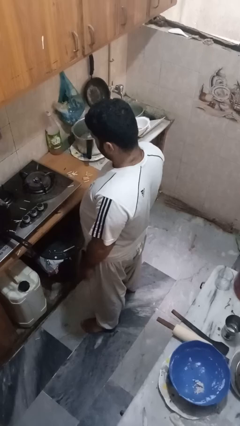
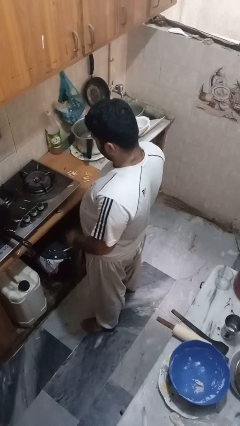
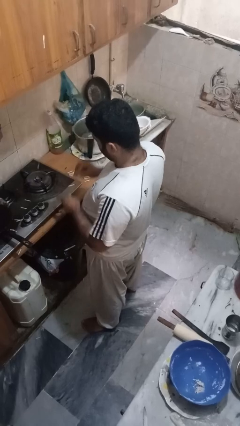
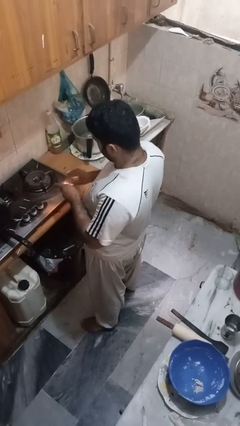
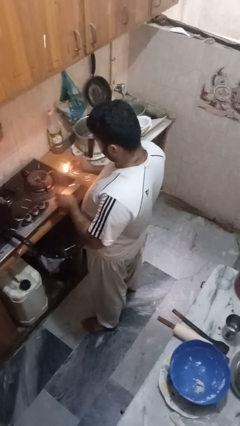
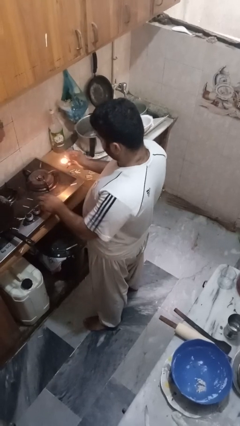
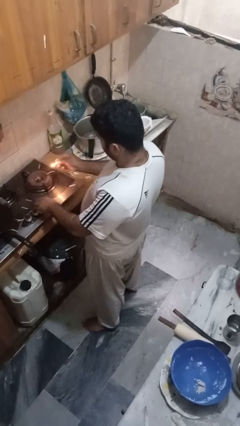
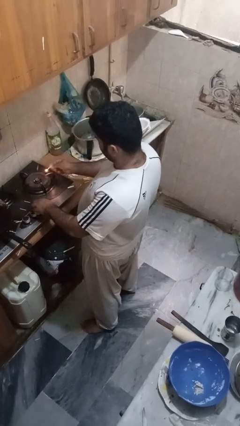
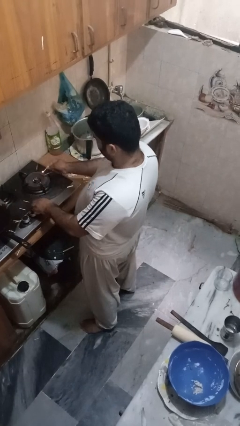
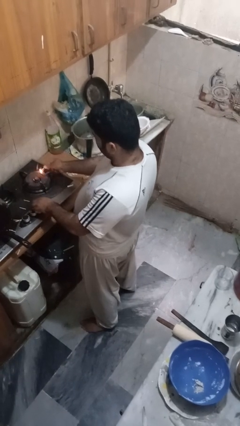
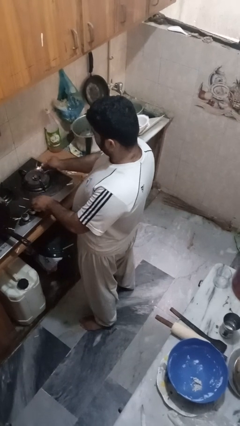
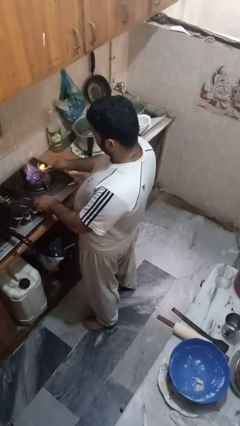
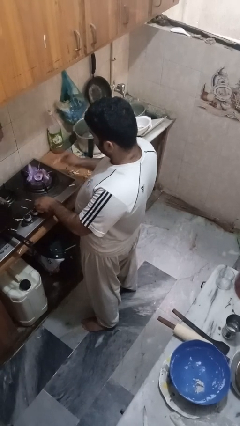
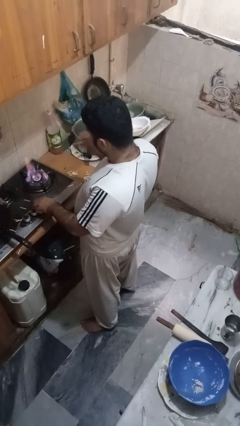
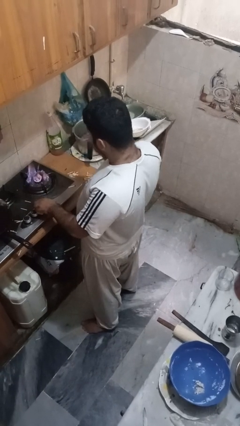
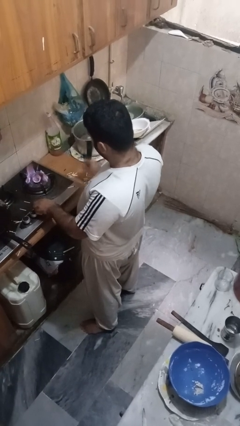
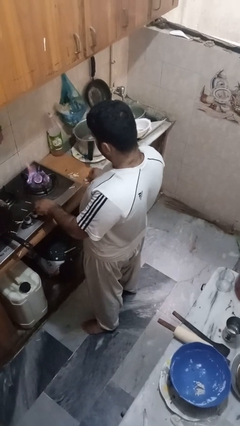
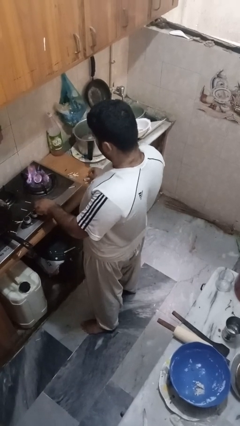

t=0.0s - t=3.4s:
person turns on stovetop

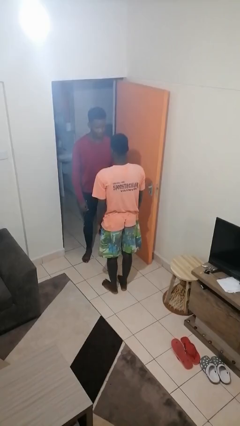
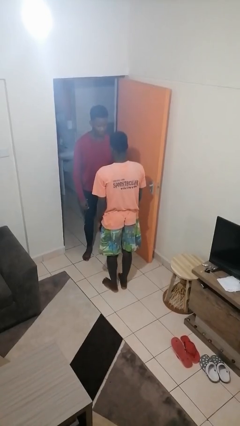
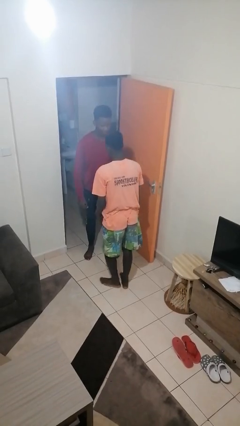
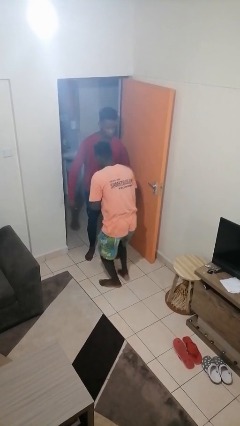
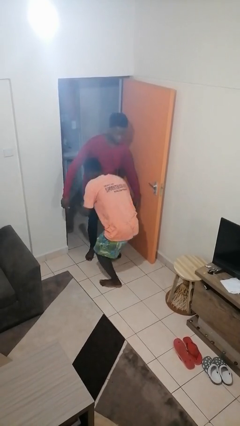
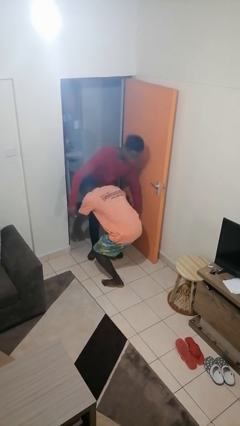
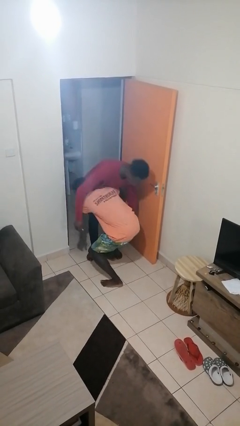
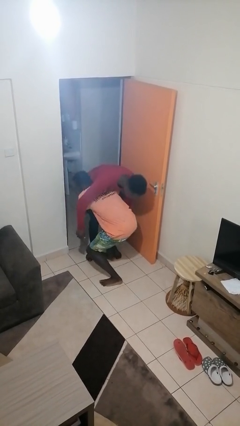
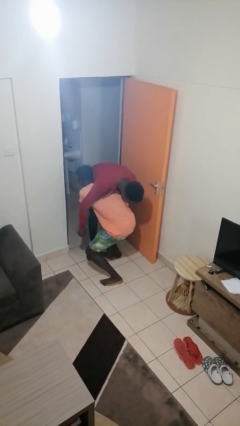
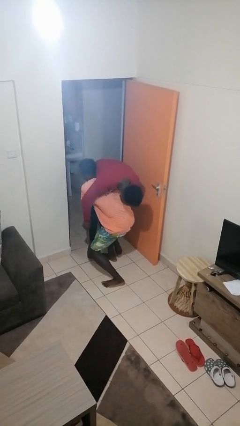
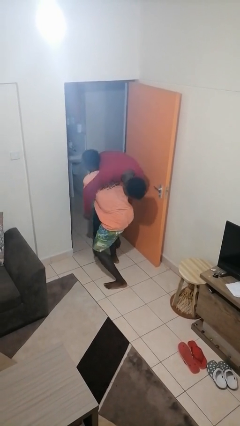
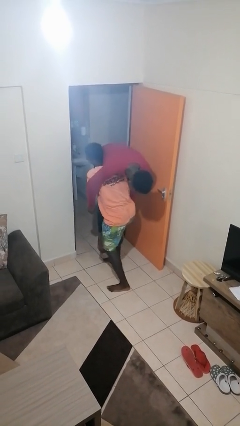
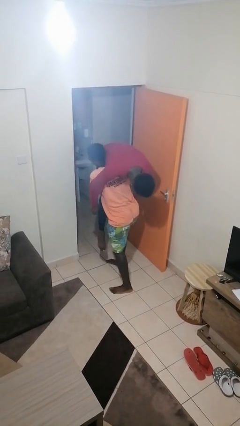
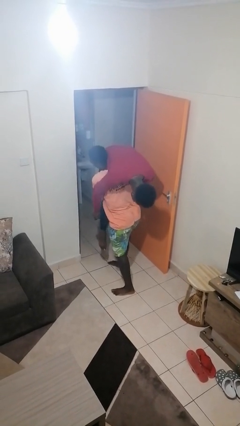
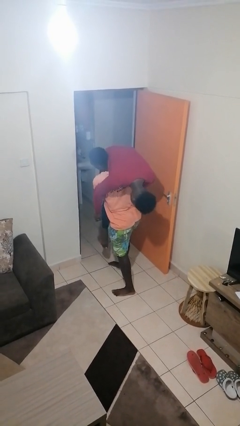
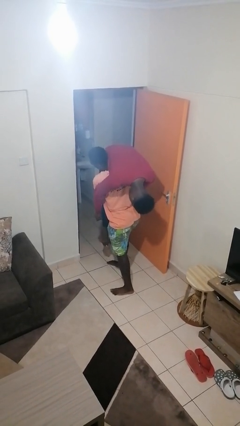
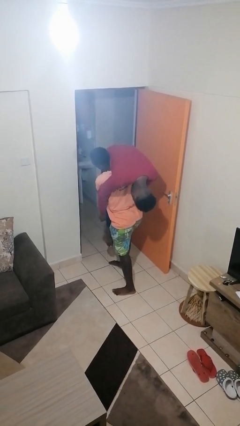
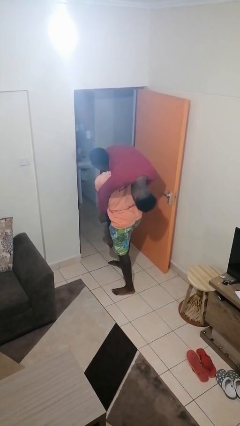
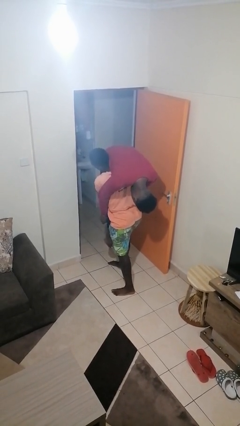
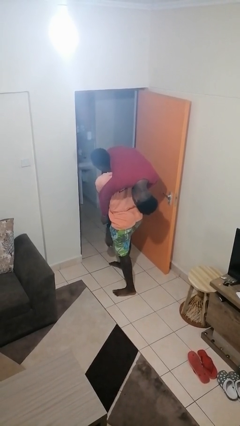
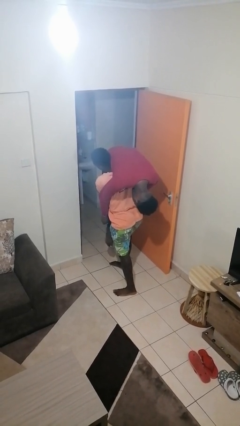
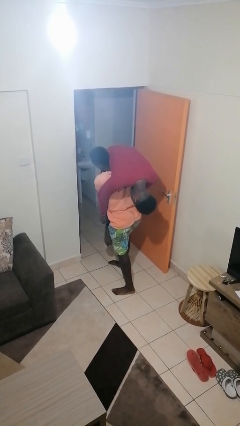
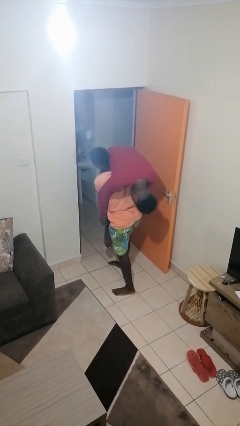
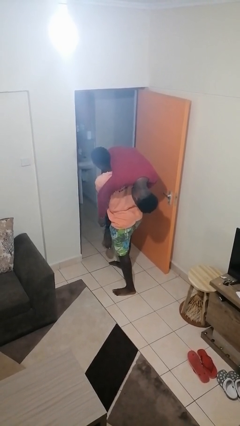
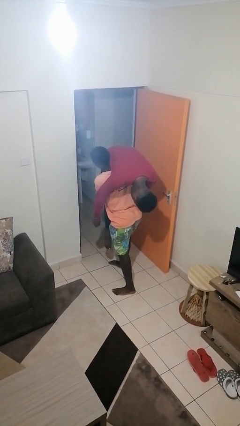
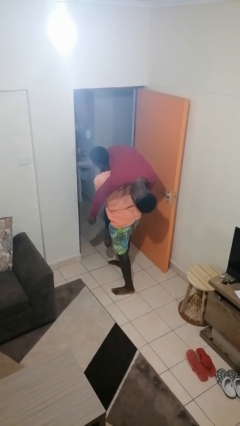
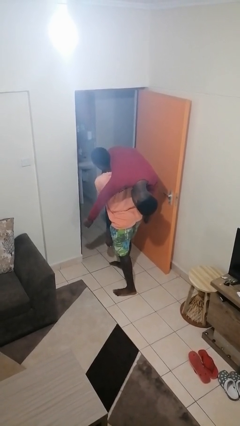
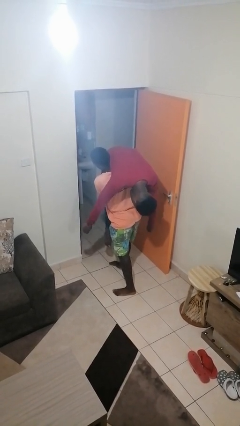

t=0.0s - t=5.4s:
person carries person over shoulder

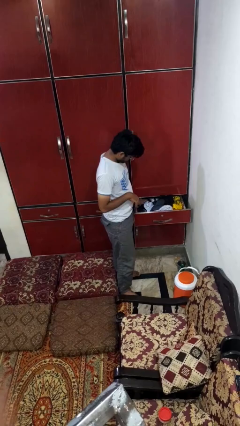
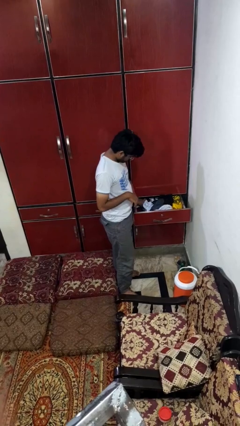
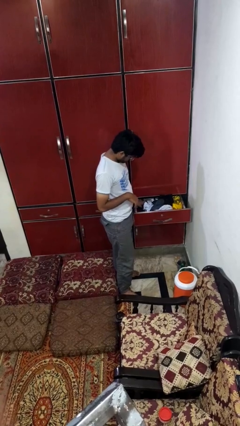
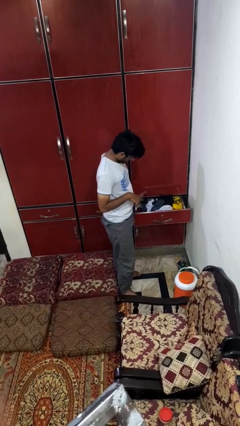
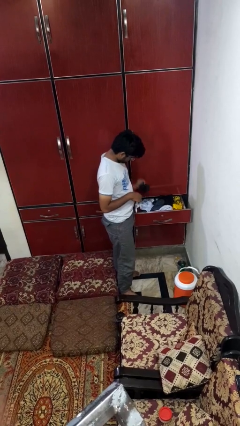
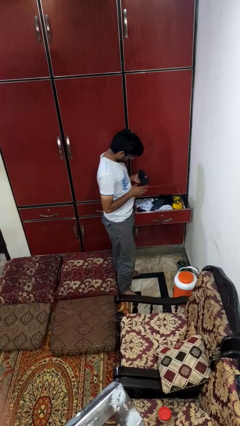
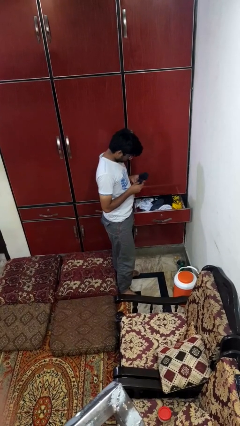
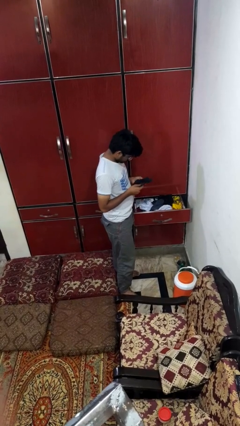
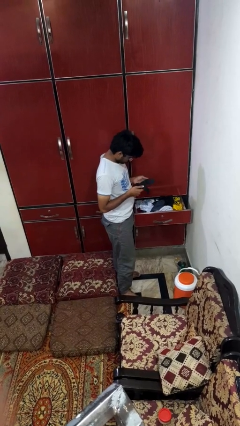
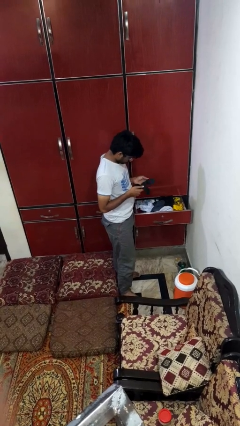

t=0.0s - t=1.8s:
person takes clothes from dresser

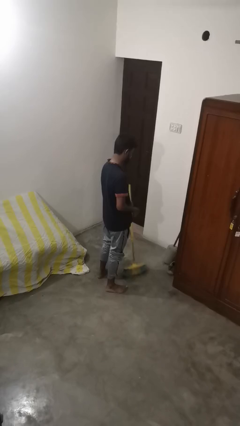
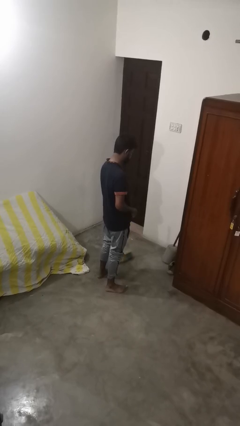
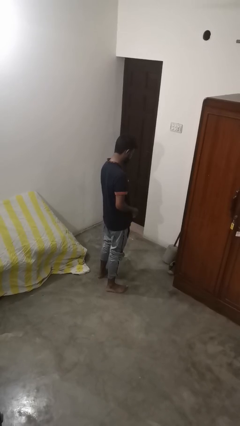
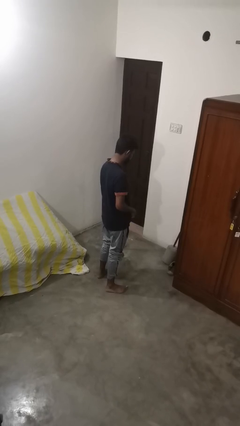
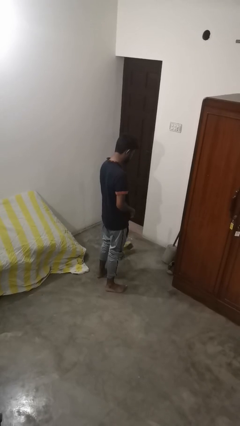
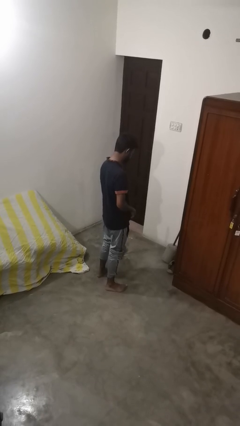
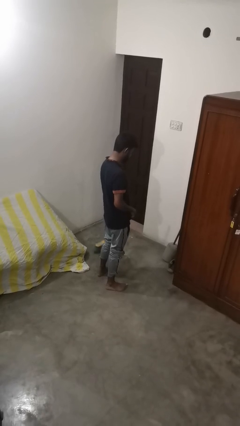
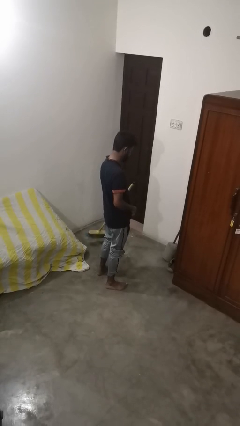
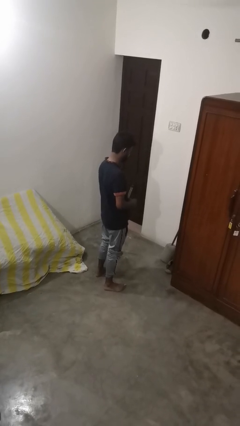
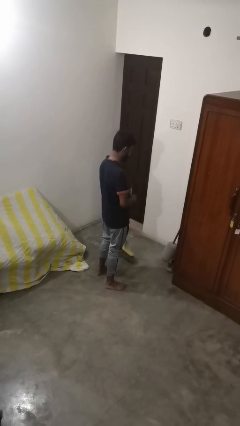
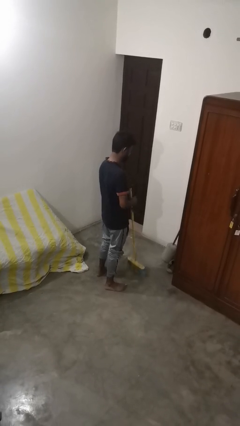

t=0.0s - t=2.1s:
person sweeps floor

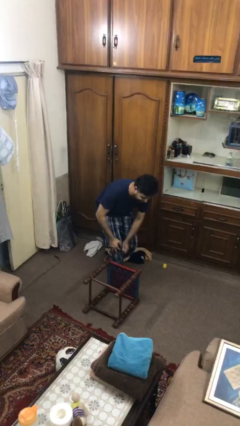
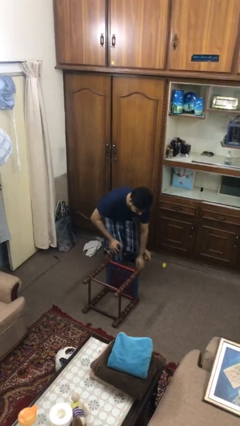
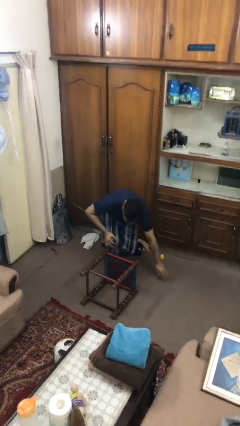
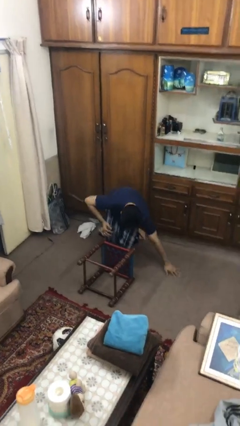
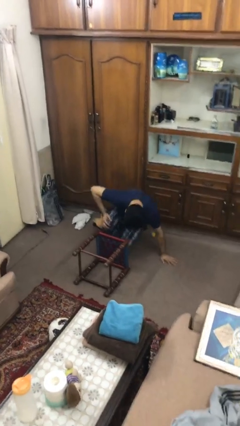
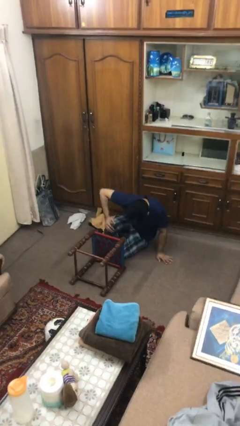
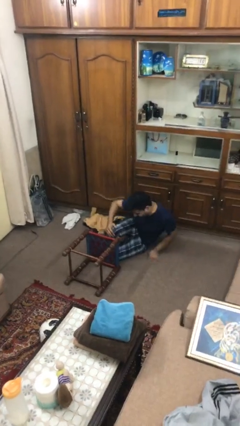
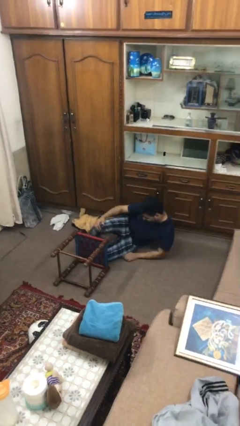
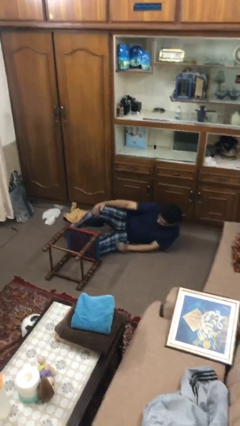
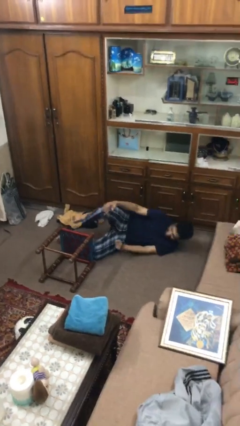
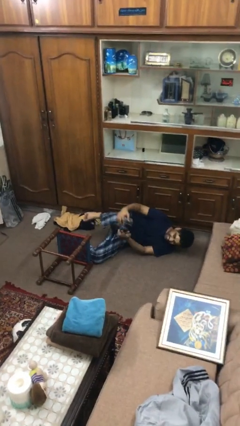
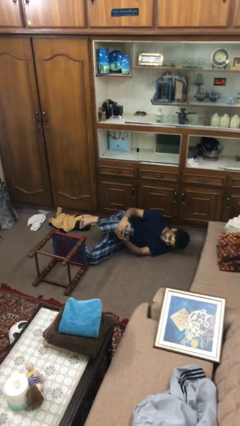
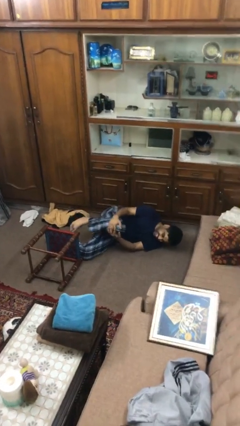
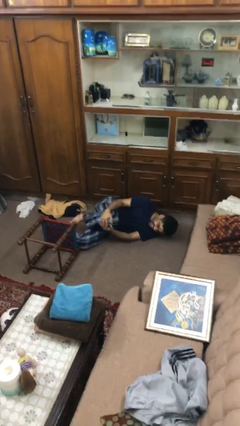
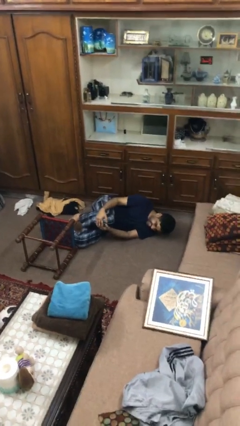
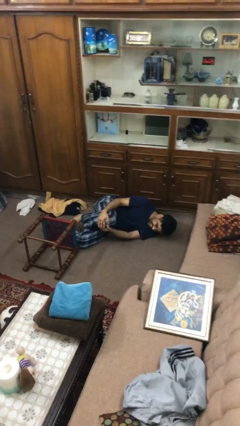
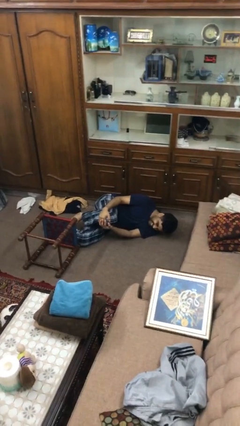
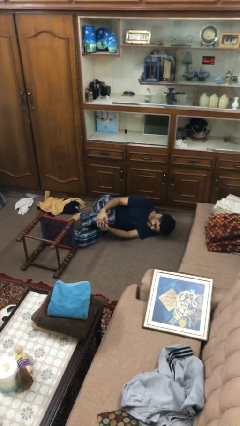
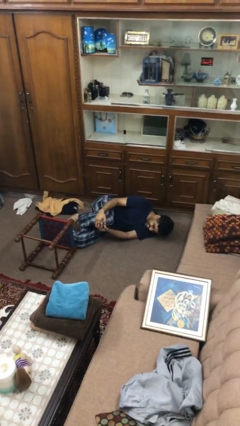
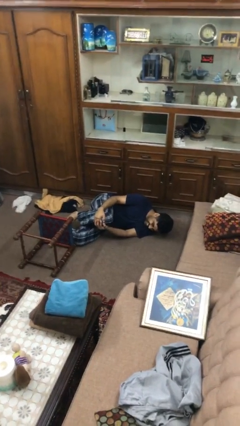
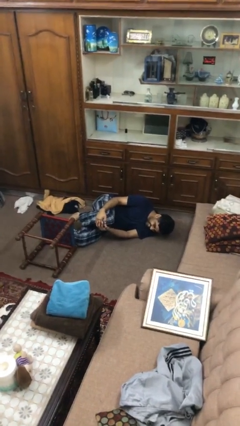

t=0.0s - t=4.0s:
person lies down on floor

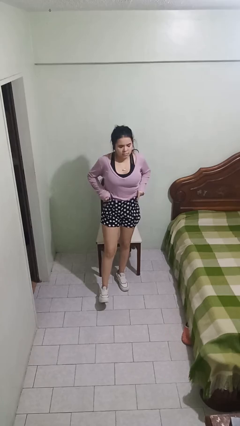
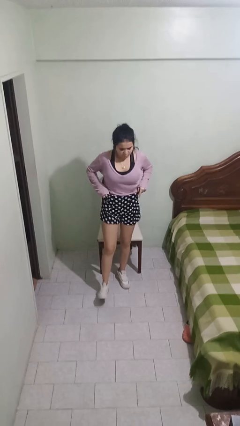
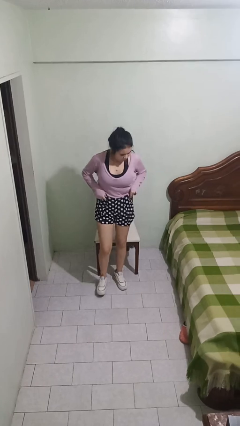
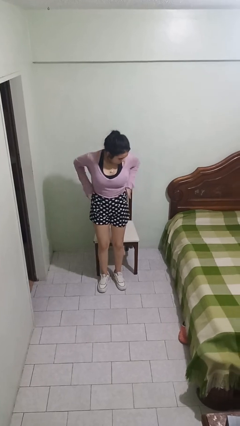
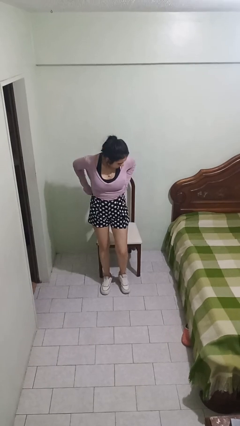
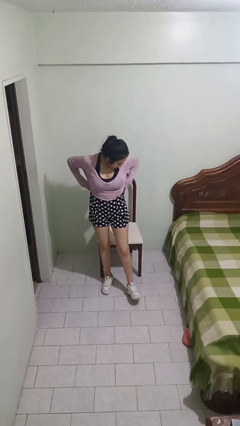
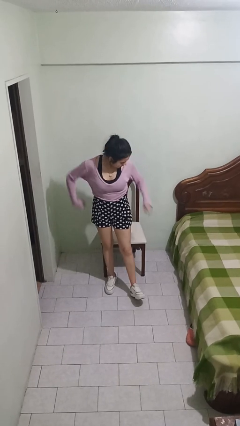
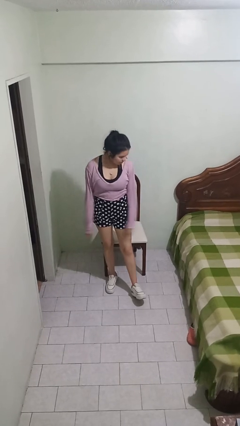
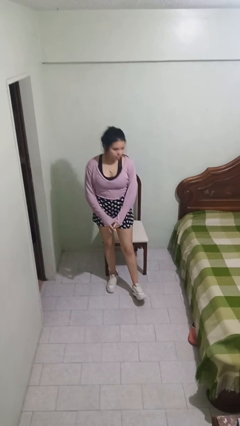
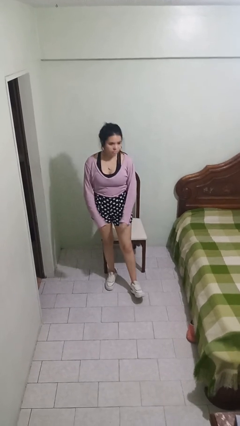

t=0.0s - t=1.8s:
person hikes up pants
